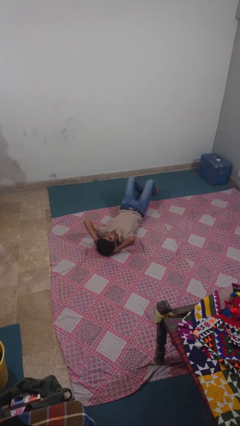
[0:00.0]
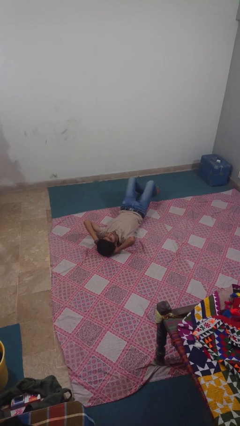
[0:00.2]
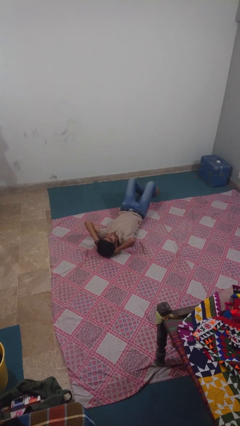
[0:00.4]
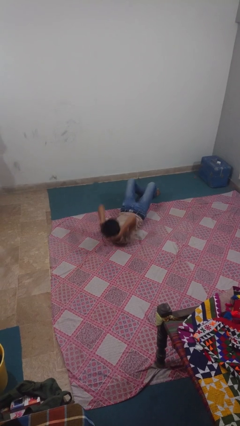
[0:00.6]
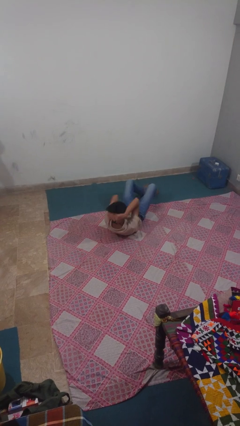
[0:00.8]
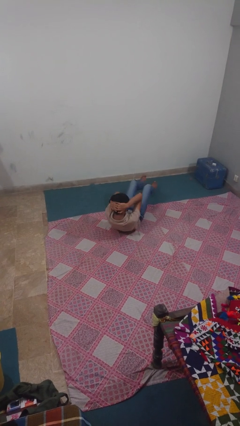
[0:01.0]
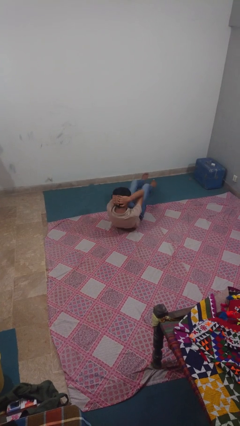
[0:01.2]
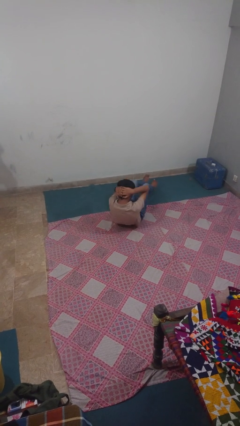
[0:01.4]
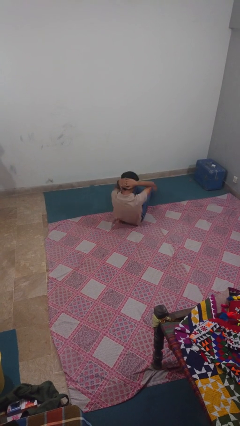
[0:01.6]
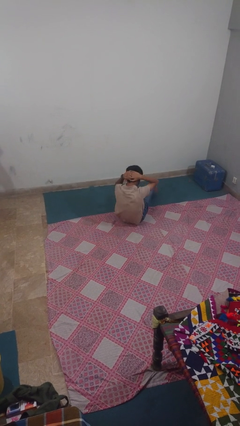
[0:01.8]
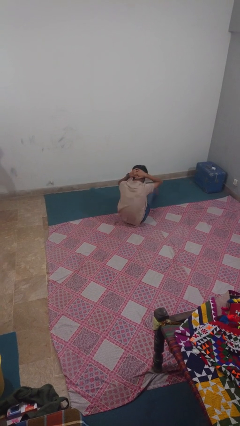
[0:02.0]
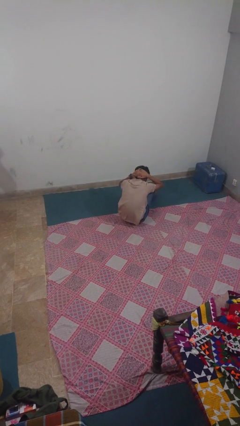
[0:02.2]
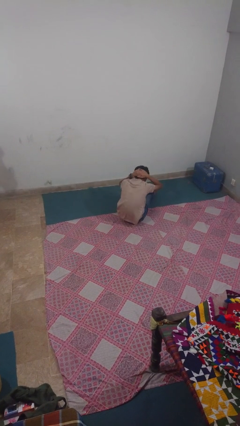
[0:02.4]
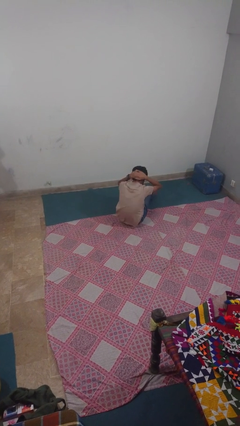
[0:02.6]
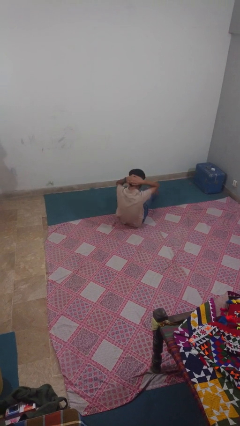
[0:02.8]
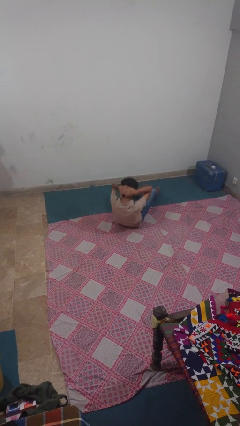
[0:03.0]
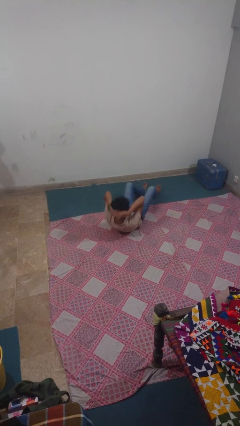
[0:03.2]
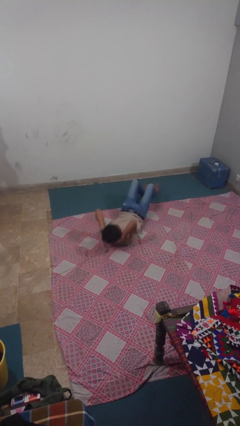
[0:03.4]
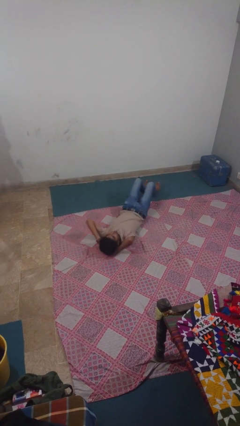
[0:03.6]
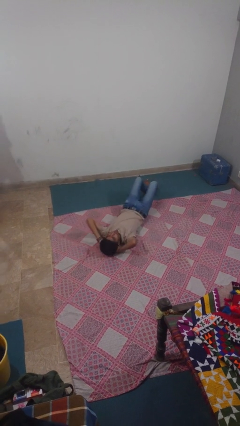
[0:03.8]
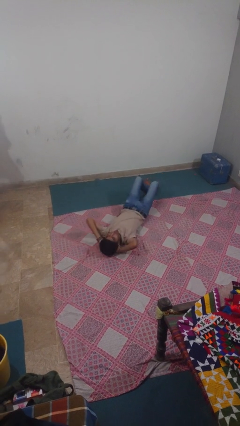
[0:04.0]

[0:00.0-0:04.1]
person exercises with situp

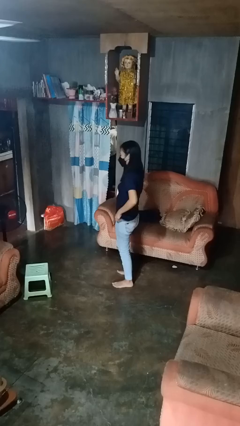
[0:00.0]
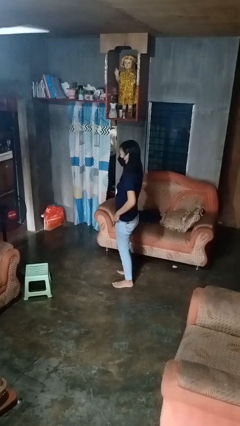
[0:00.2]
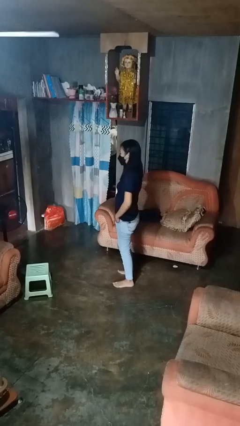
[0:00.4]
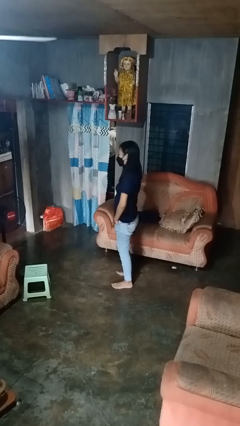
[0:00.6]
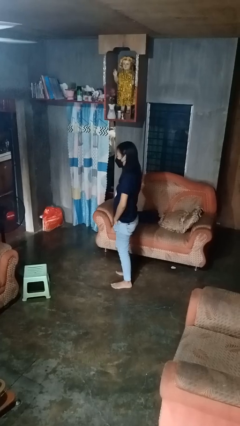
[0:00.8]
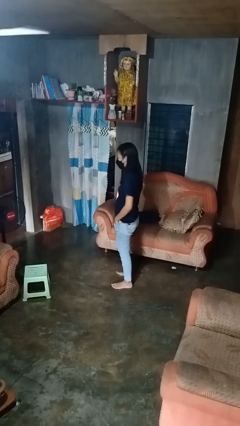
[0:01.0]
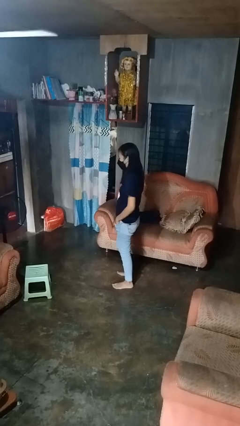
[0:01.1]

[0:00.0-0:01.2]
person puts hands in back pockets

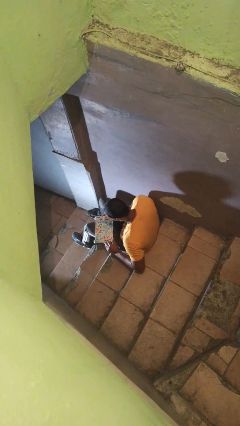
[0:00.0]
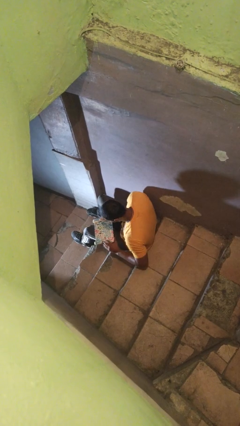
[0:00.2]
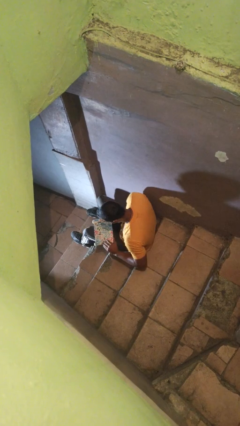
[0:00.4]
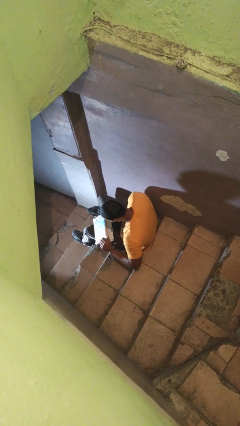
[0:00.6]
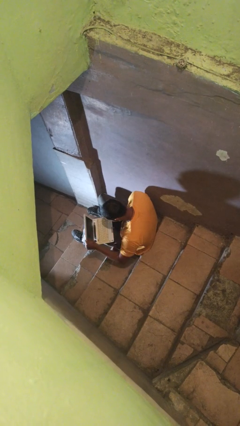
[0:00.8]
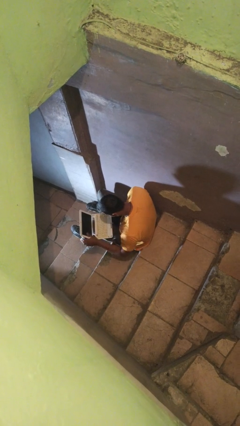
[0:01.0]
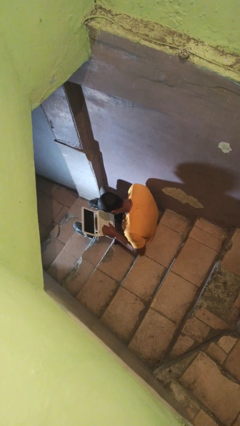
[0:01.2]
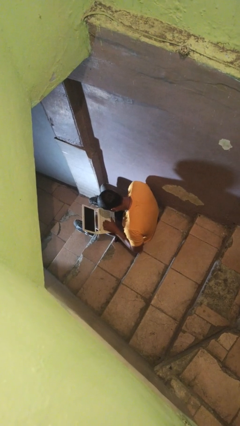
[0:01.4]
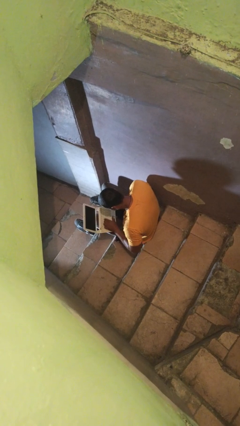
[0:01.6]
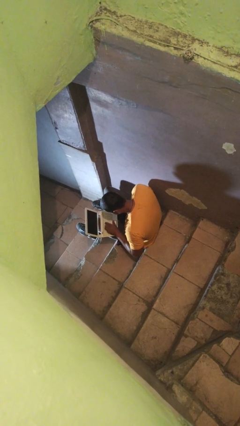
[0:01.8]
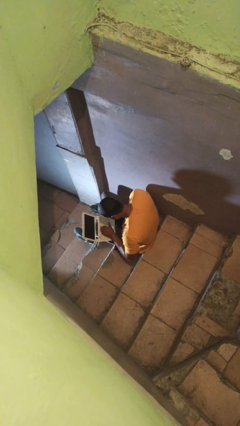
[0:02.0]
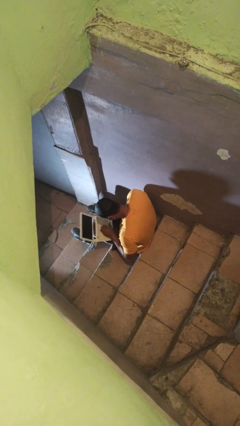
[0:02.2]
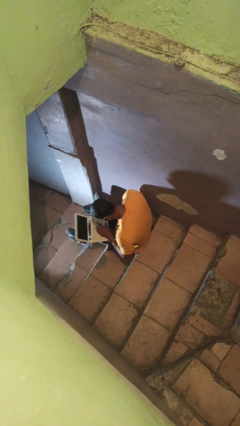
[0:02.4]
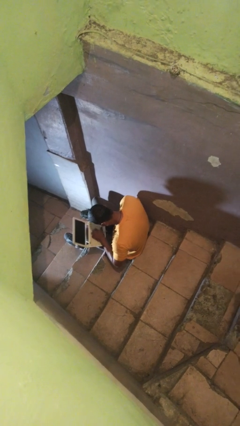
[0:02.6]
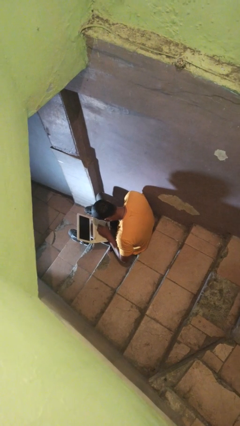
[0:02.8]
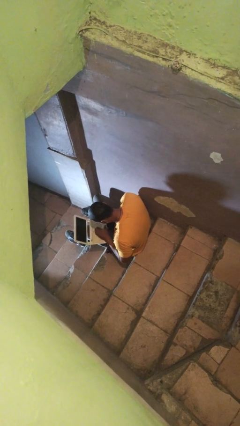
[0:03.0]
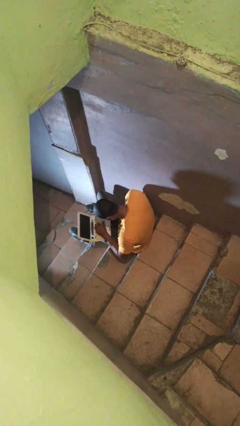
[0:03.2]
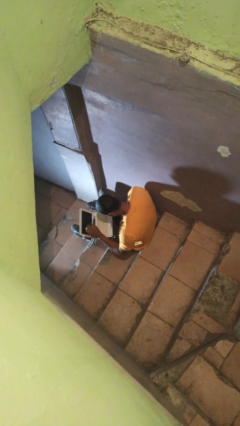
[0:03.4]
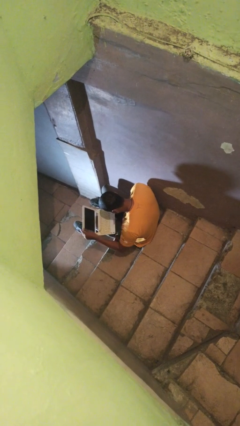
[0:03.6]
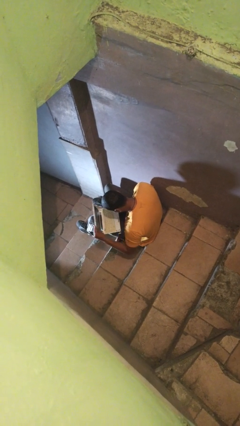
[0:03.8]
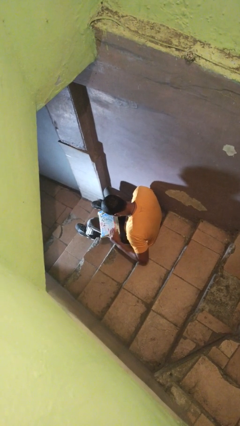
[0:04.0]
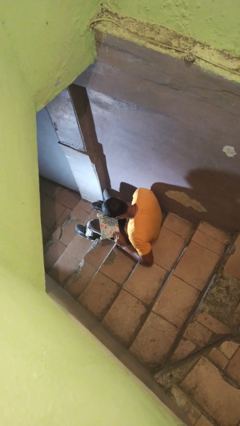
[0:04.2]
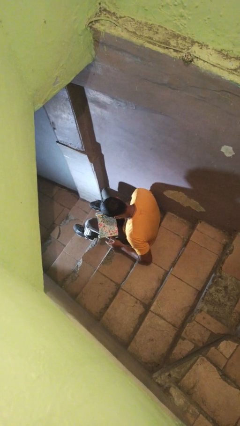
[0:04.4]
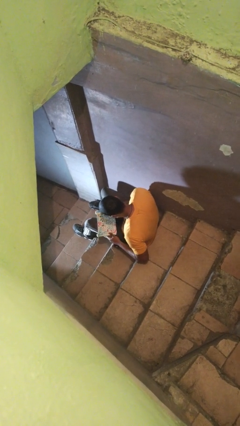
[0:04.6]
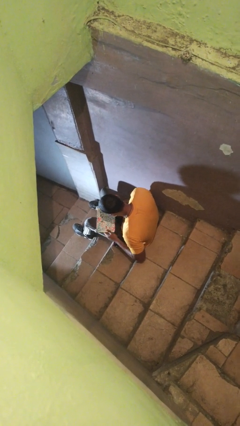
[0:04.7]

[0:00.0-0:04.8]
person interacts with laptop

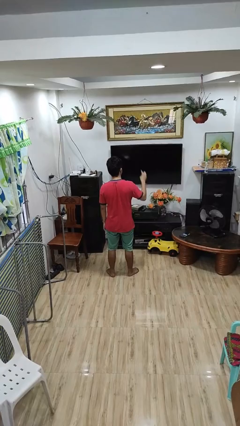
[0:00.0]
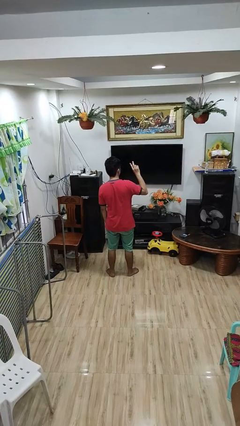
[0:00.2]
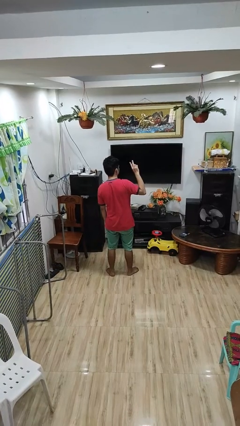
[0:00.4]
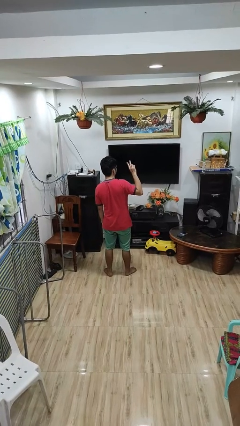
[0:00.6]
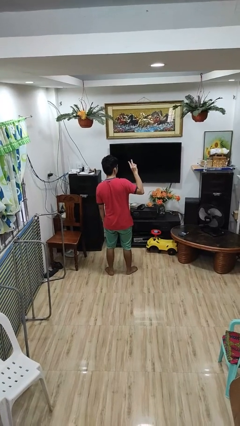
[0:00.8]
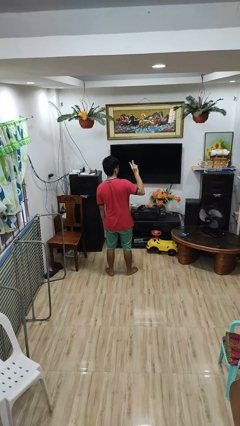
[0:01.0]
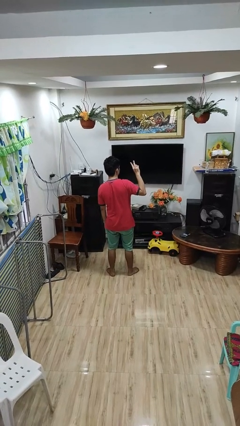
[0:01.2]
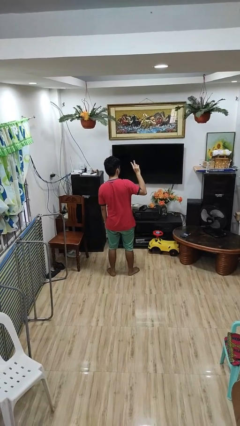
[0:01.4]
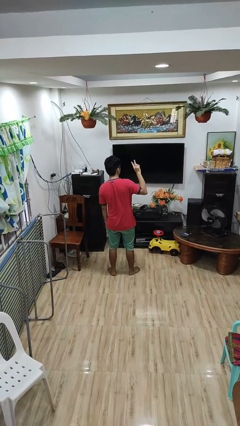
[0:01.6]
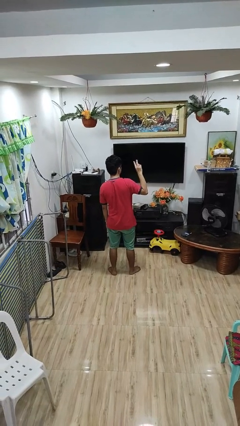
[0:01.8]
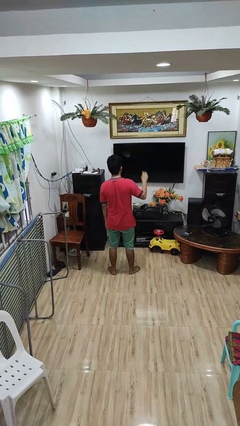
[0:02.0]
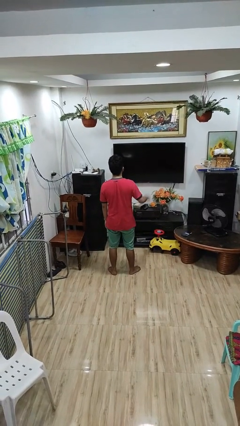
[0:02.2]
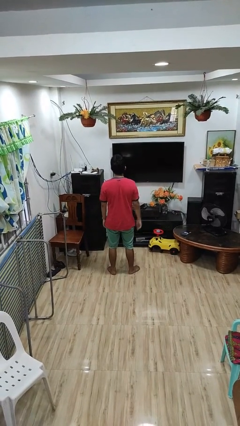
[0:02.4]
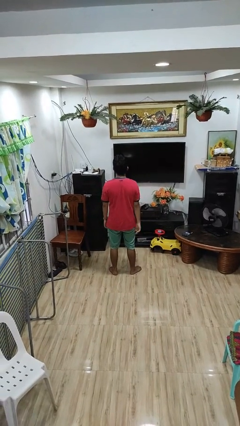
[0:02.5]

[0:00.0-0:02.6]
person gestures peace

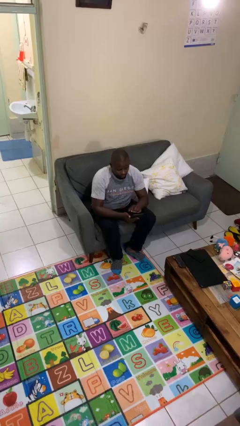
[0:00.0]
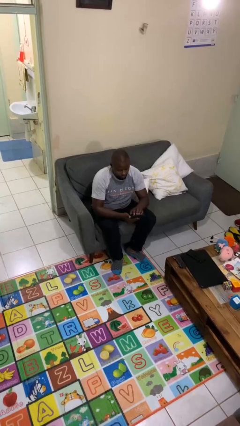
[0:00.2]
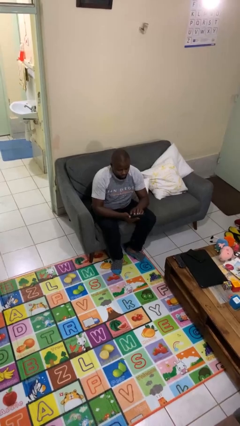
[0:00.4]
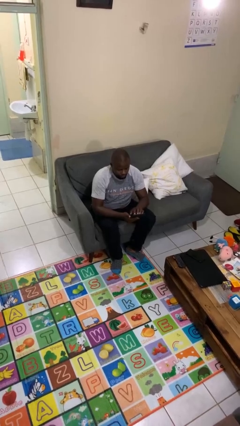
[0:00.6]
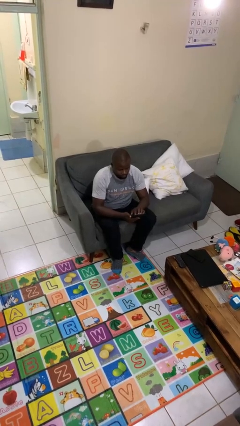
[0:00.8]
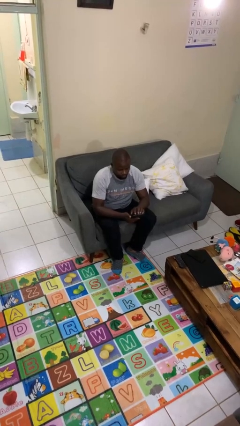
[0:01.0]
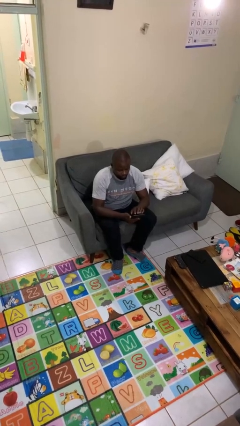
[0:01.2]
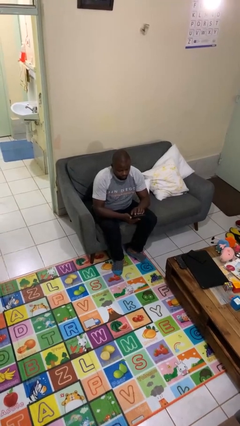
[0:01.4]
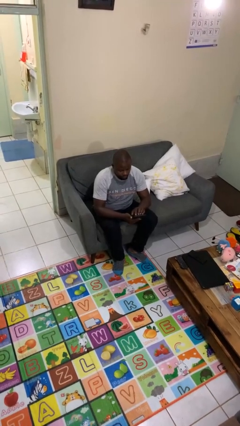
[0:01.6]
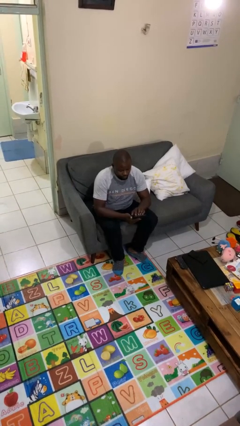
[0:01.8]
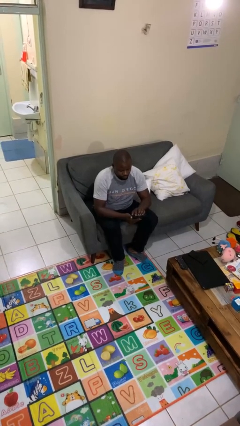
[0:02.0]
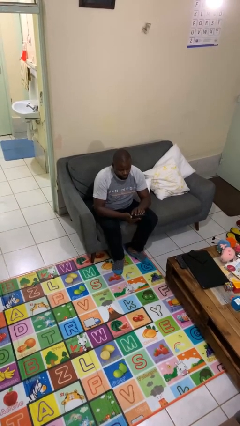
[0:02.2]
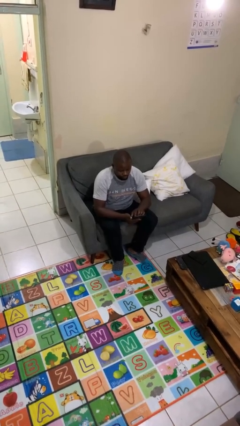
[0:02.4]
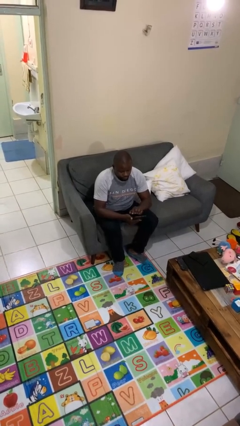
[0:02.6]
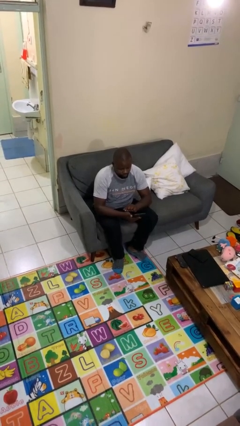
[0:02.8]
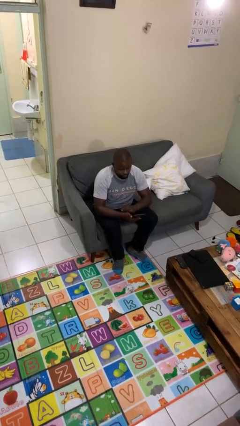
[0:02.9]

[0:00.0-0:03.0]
person interacts with tablet

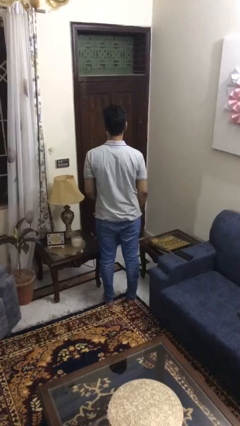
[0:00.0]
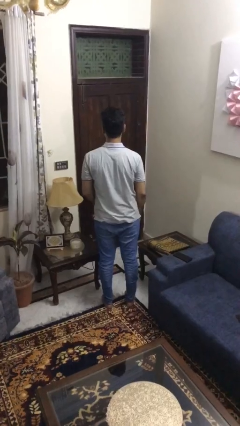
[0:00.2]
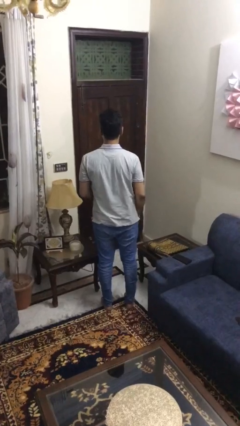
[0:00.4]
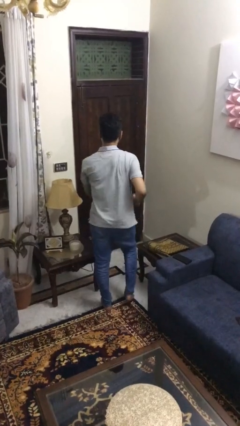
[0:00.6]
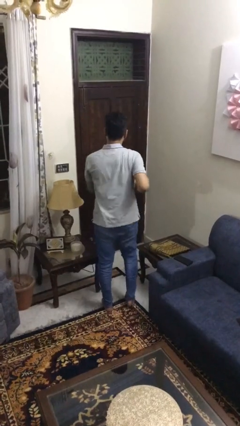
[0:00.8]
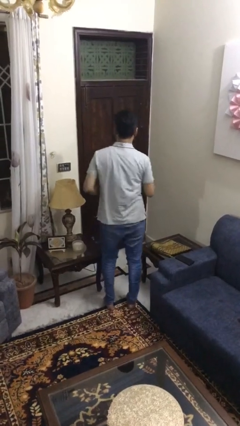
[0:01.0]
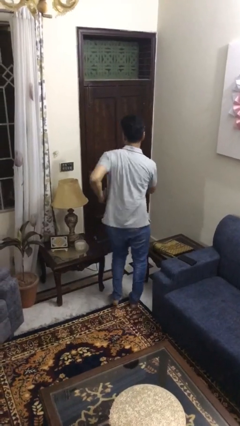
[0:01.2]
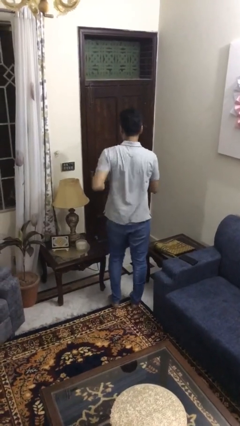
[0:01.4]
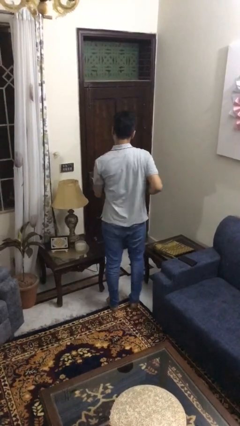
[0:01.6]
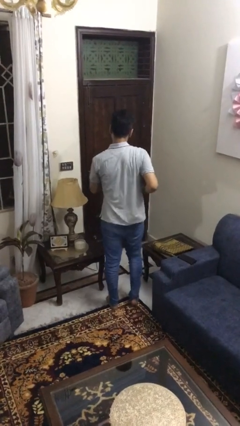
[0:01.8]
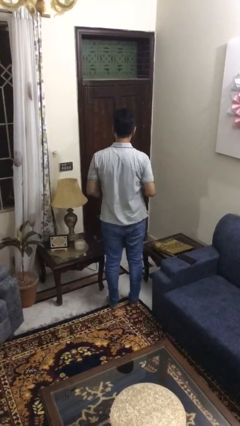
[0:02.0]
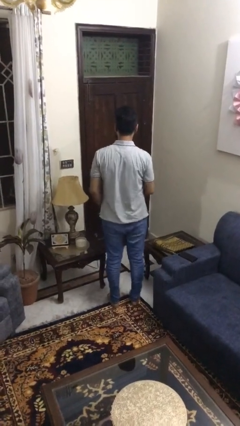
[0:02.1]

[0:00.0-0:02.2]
person dances in place
